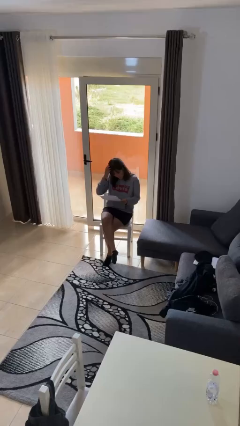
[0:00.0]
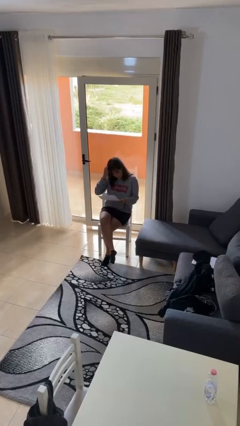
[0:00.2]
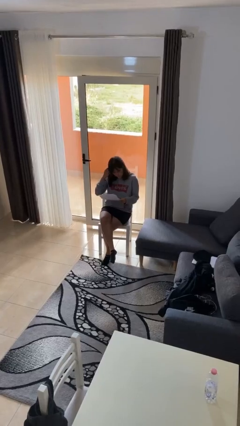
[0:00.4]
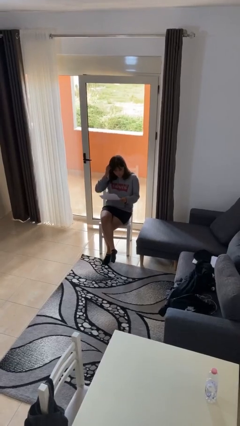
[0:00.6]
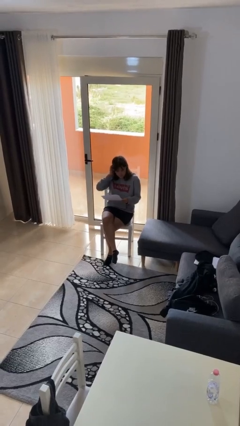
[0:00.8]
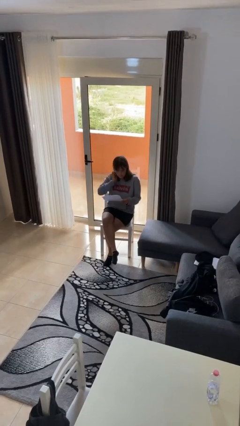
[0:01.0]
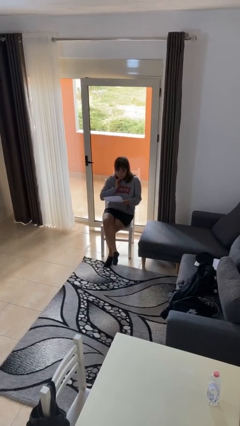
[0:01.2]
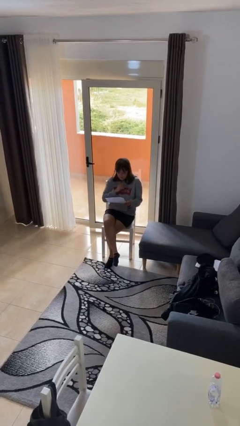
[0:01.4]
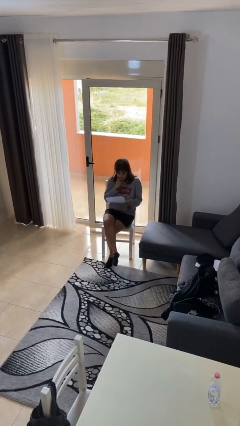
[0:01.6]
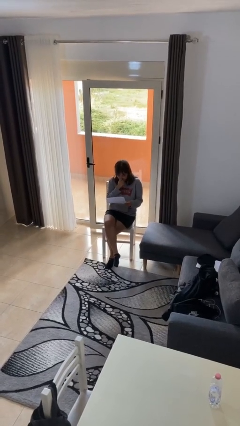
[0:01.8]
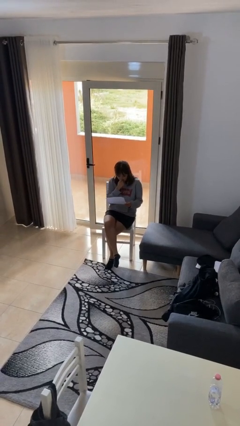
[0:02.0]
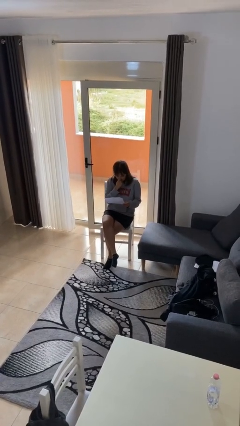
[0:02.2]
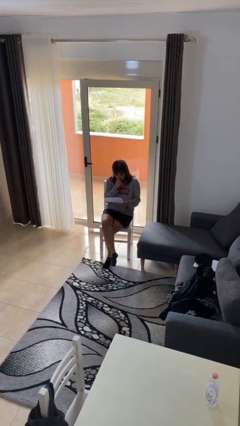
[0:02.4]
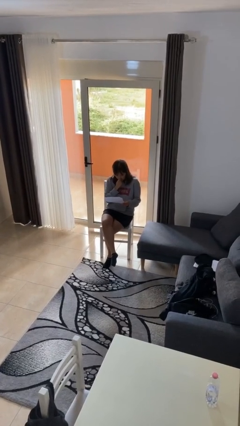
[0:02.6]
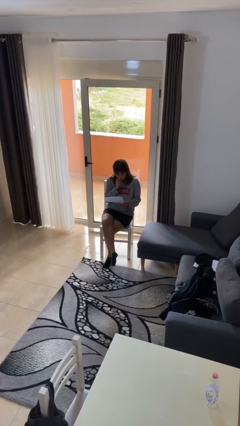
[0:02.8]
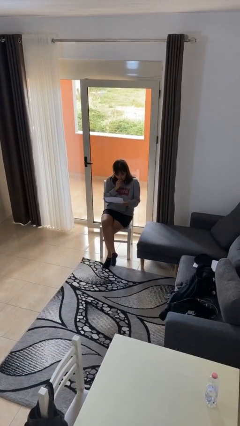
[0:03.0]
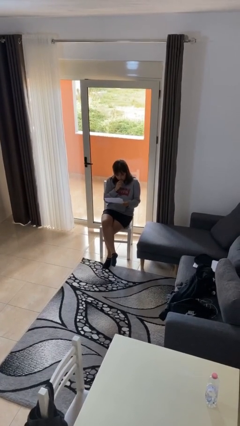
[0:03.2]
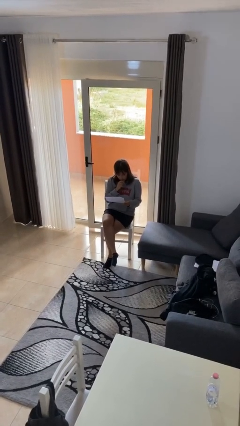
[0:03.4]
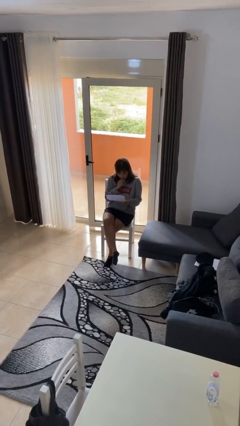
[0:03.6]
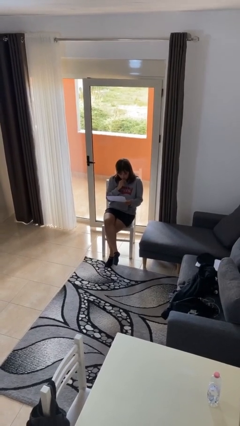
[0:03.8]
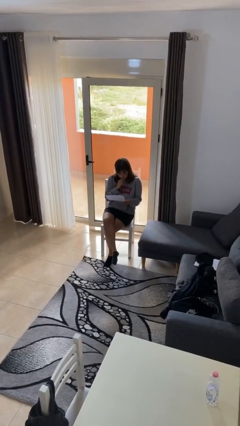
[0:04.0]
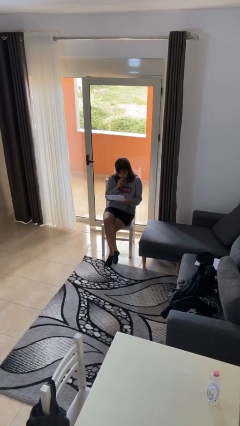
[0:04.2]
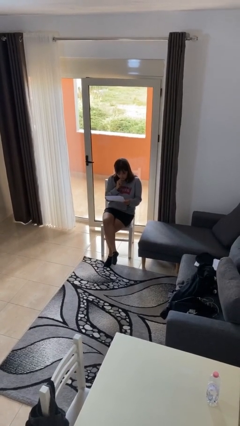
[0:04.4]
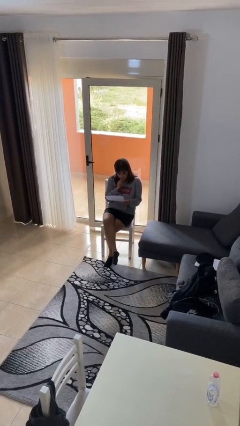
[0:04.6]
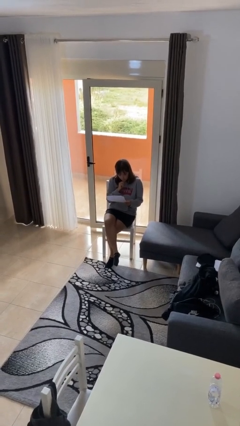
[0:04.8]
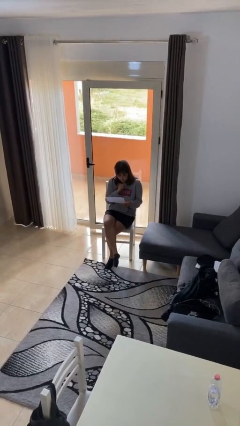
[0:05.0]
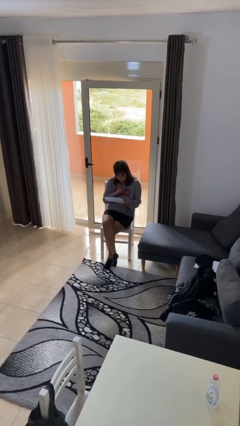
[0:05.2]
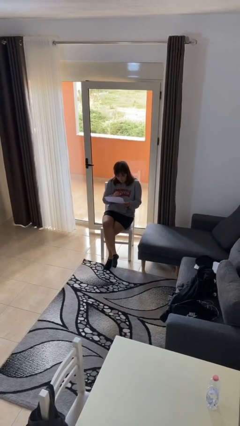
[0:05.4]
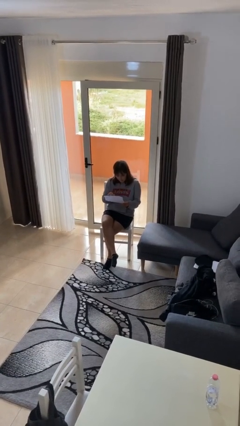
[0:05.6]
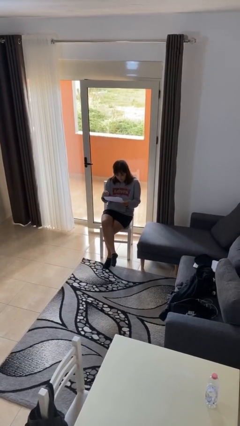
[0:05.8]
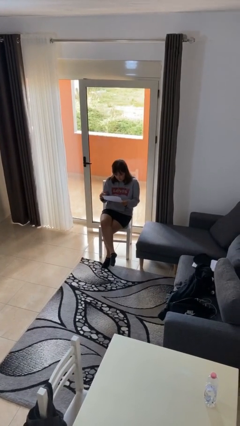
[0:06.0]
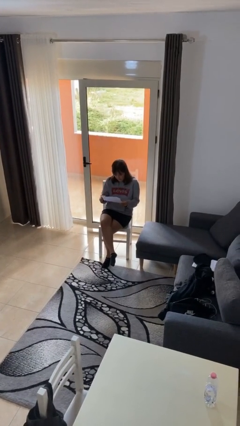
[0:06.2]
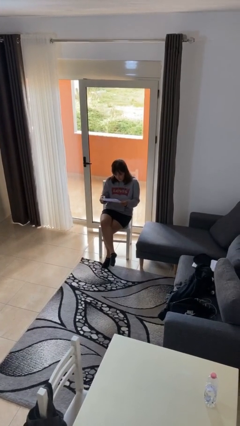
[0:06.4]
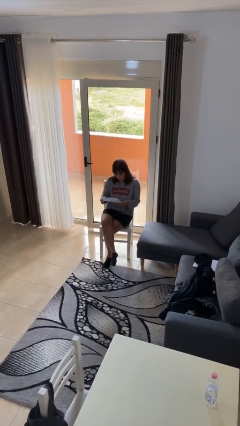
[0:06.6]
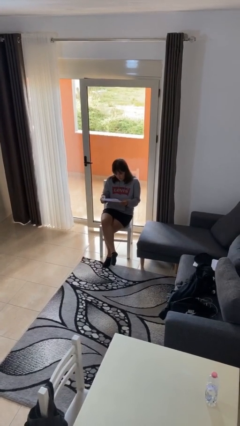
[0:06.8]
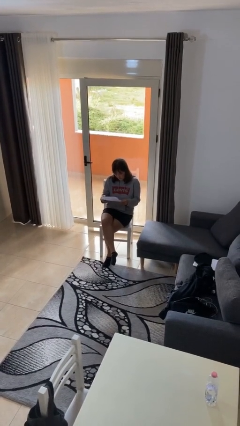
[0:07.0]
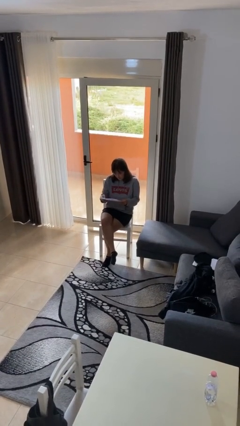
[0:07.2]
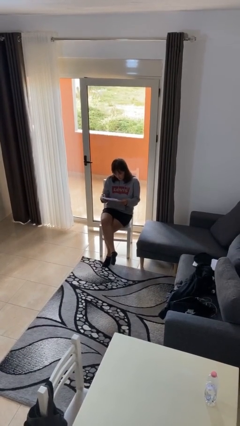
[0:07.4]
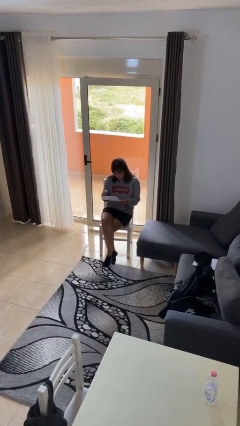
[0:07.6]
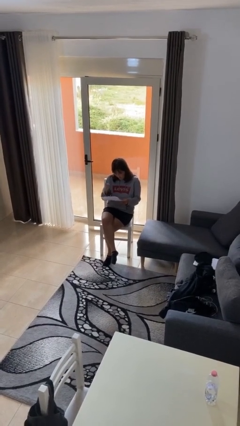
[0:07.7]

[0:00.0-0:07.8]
person reads document

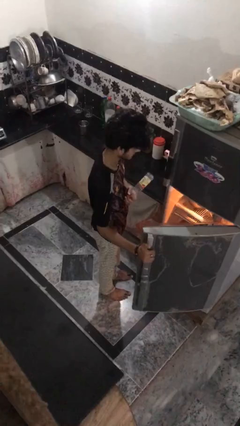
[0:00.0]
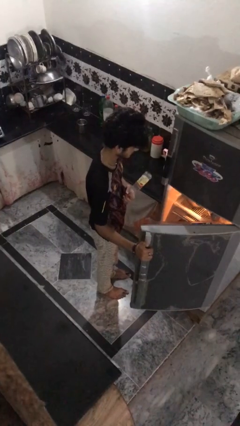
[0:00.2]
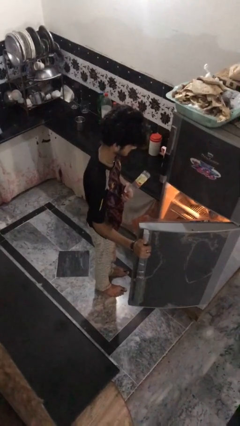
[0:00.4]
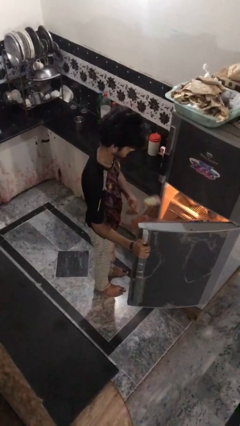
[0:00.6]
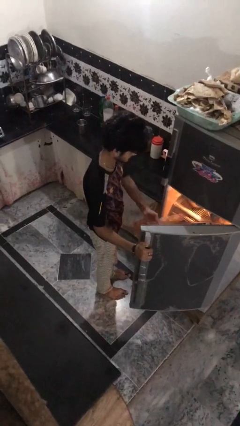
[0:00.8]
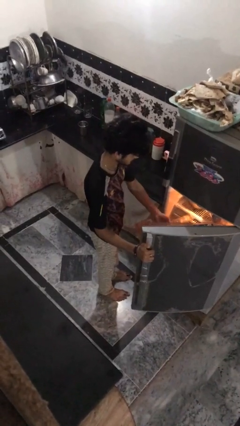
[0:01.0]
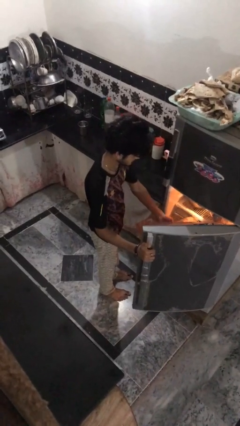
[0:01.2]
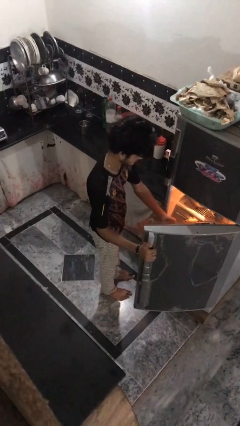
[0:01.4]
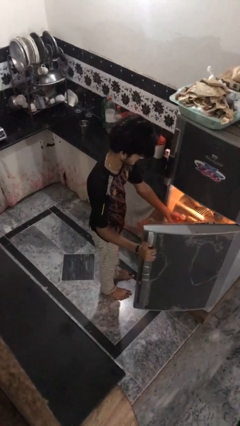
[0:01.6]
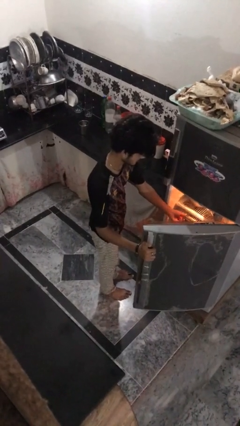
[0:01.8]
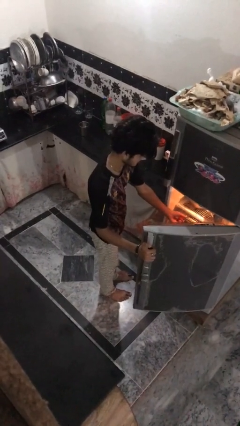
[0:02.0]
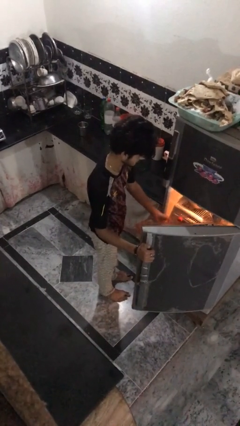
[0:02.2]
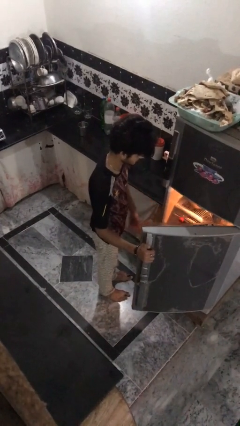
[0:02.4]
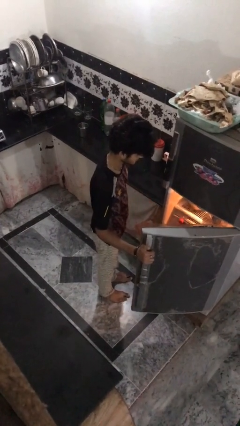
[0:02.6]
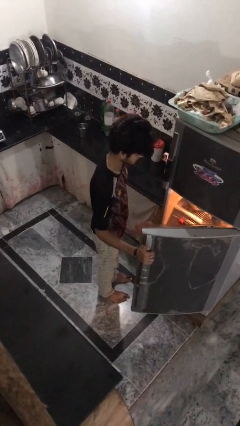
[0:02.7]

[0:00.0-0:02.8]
person puts object into refrigerator

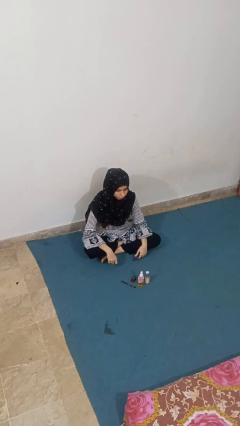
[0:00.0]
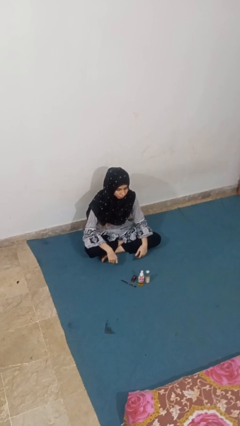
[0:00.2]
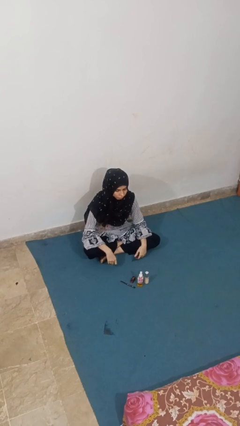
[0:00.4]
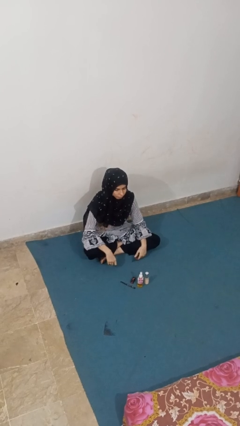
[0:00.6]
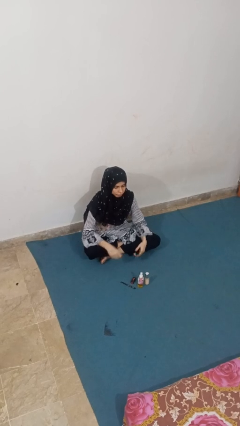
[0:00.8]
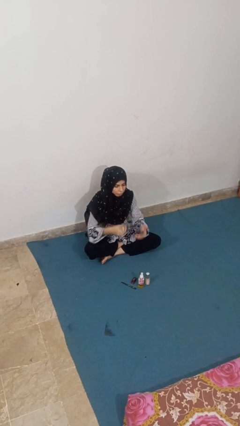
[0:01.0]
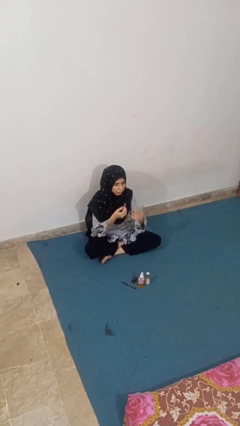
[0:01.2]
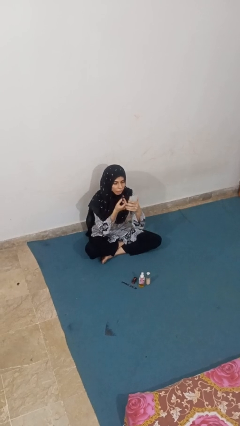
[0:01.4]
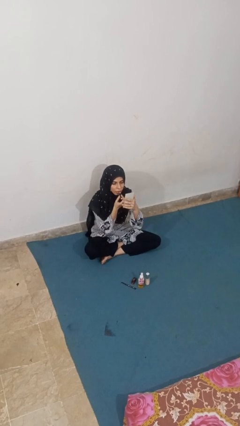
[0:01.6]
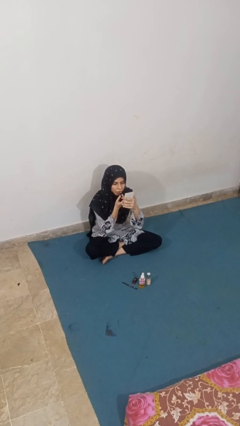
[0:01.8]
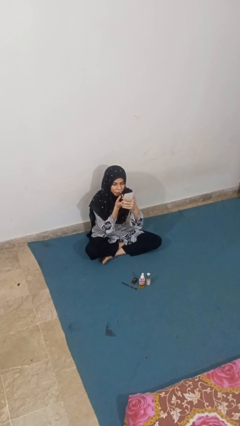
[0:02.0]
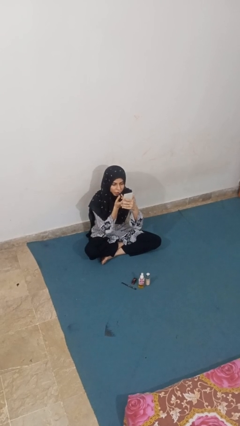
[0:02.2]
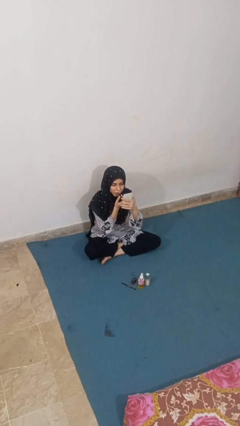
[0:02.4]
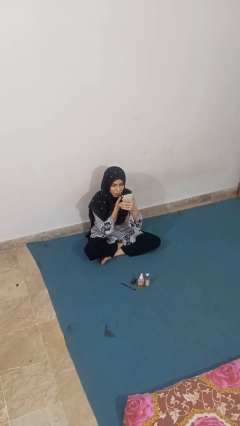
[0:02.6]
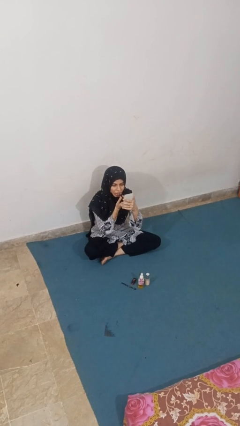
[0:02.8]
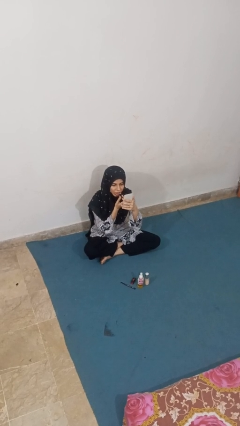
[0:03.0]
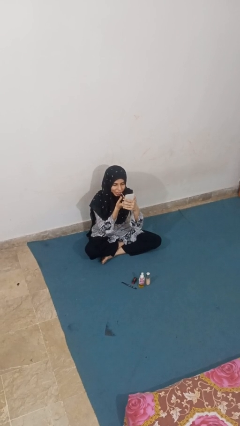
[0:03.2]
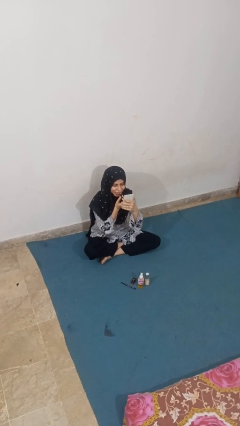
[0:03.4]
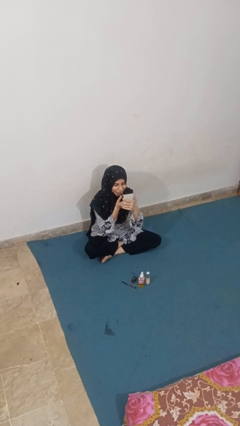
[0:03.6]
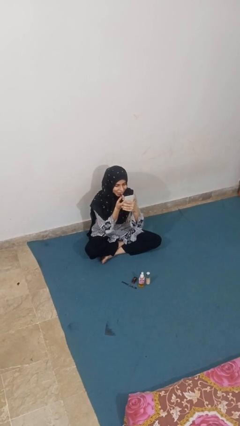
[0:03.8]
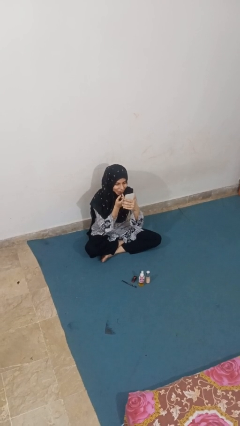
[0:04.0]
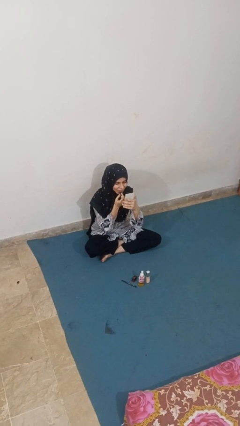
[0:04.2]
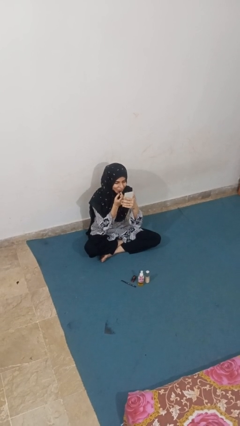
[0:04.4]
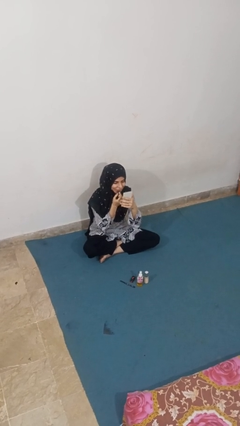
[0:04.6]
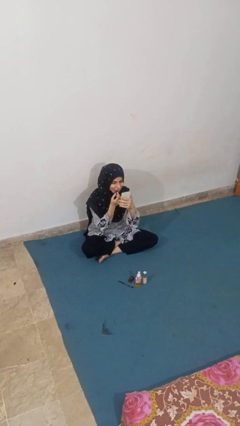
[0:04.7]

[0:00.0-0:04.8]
person applies lip makeup

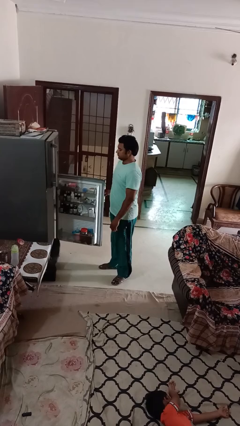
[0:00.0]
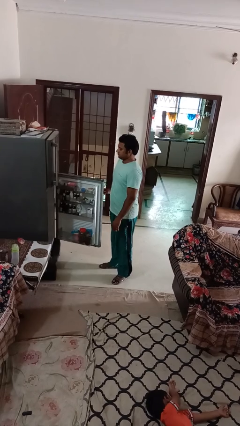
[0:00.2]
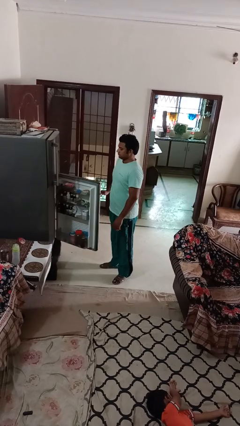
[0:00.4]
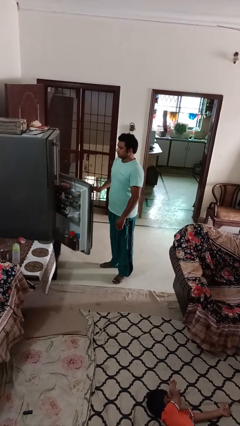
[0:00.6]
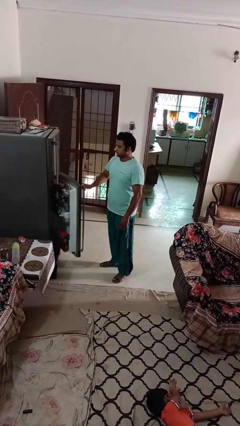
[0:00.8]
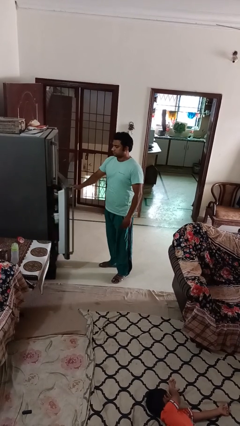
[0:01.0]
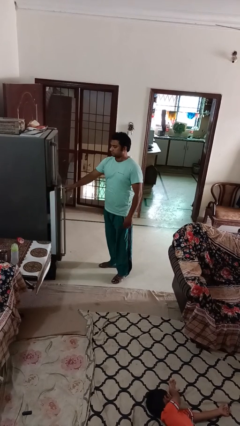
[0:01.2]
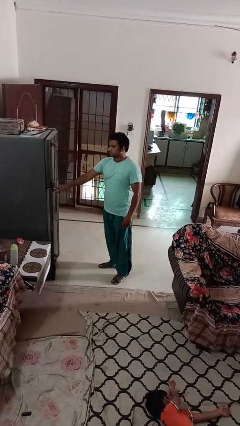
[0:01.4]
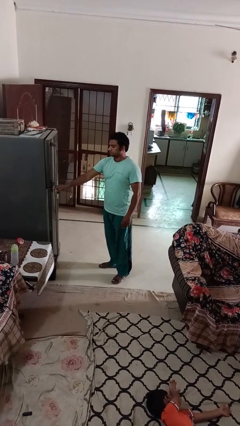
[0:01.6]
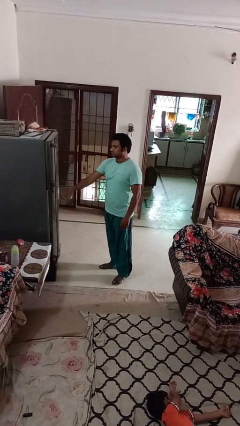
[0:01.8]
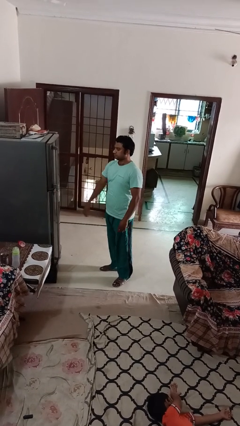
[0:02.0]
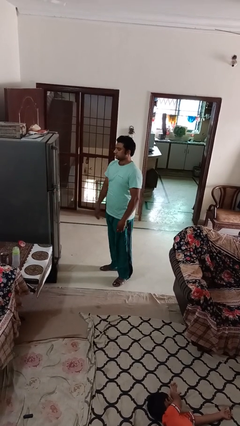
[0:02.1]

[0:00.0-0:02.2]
person closes refrigerator

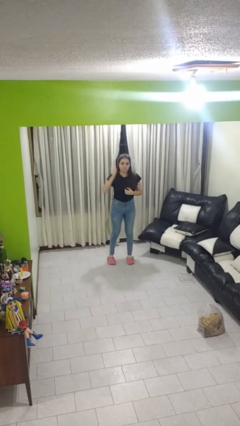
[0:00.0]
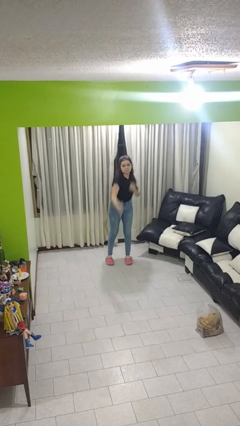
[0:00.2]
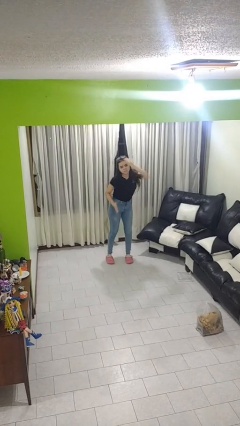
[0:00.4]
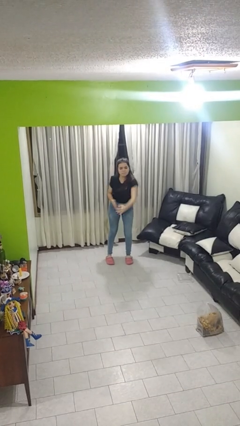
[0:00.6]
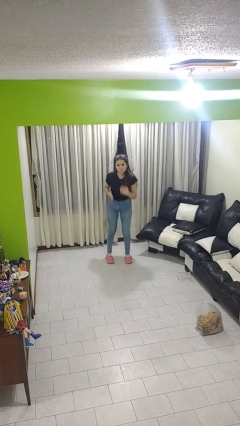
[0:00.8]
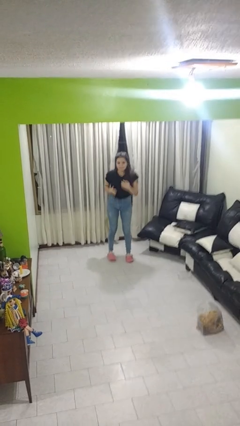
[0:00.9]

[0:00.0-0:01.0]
person karate chop
